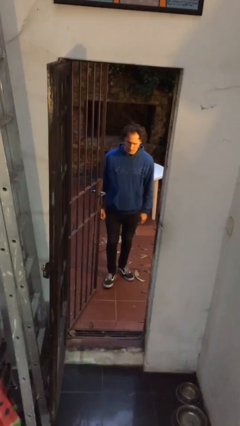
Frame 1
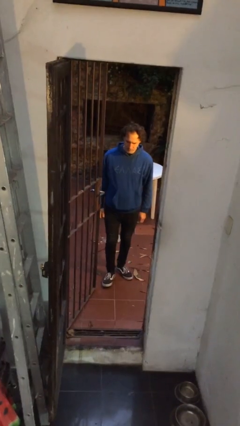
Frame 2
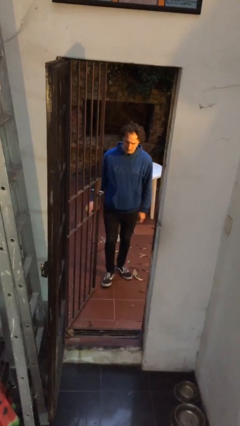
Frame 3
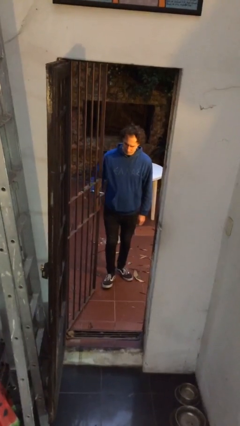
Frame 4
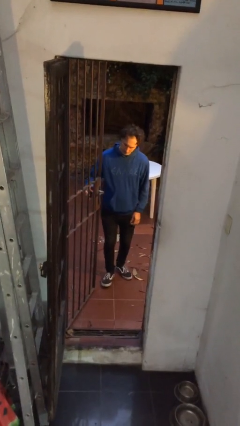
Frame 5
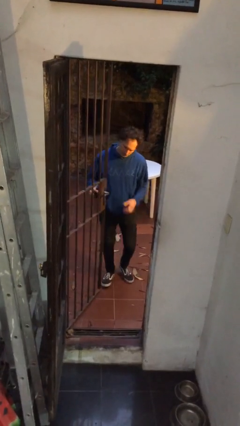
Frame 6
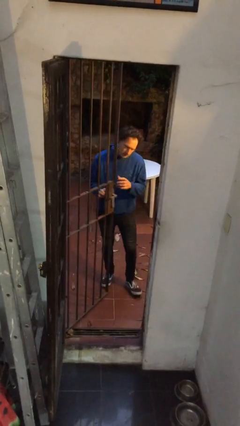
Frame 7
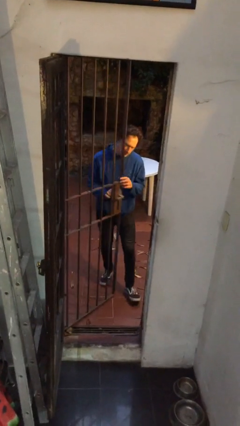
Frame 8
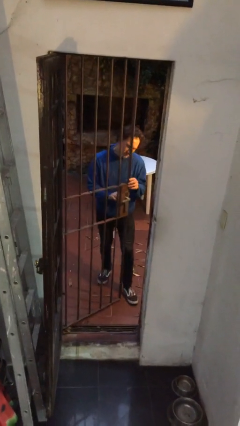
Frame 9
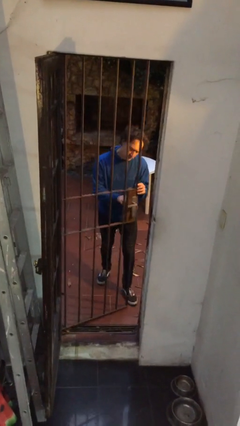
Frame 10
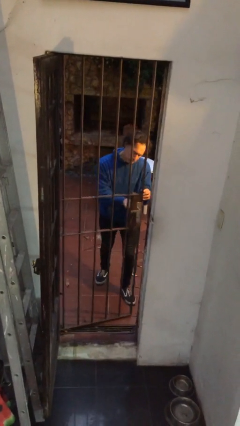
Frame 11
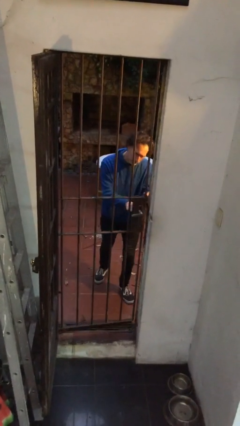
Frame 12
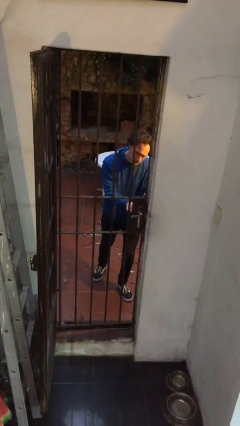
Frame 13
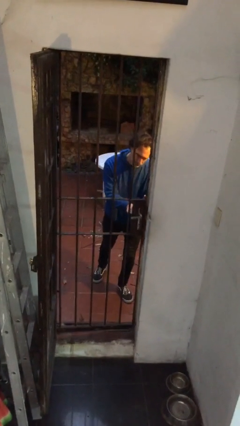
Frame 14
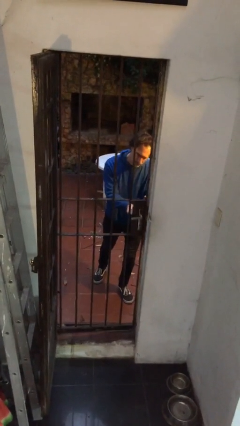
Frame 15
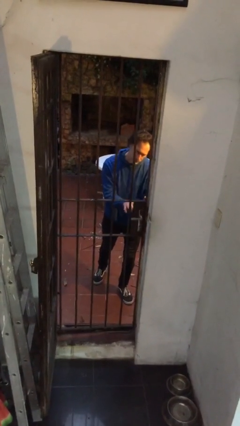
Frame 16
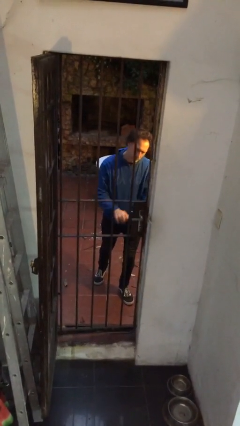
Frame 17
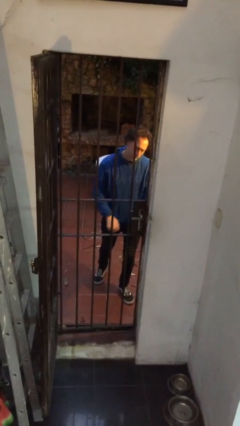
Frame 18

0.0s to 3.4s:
person closes gate

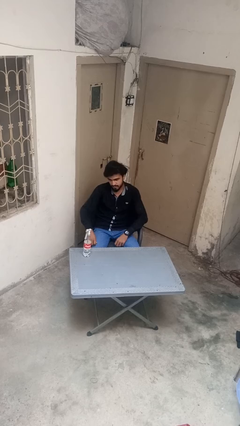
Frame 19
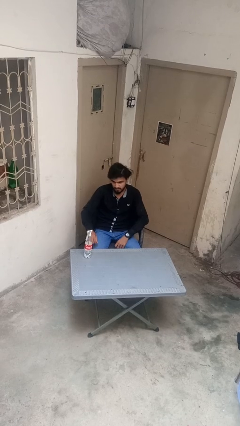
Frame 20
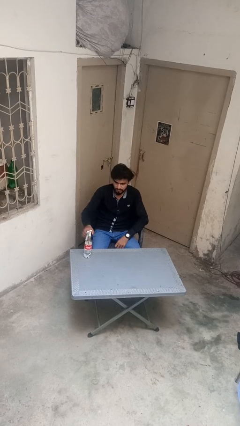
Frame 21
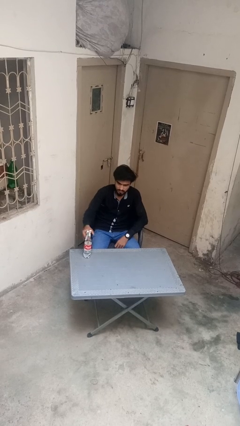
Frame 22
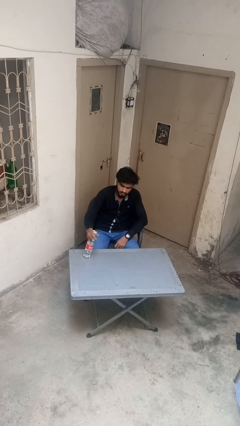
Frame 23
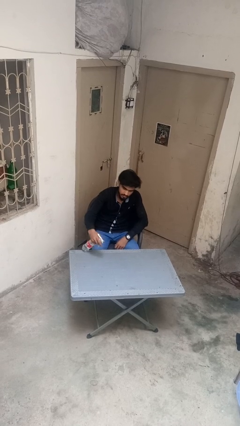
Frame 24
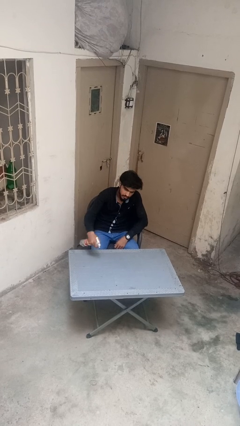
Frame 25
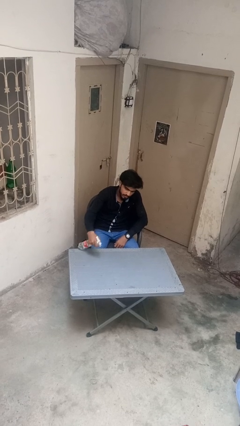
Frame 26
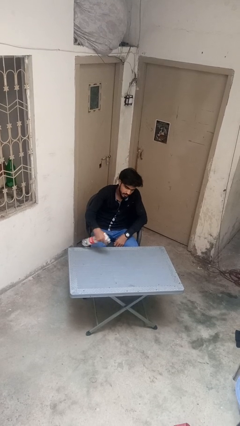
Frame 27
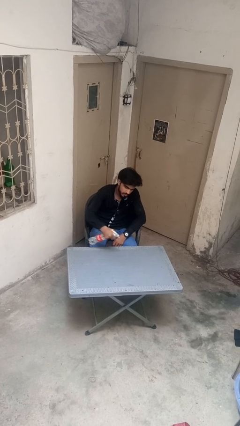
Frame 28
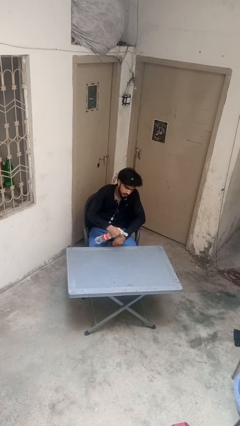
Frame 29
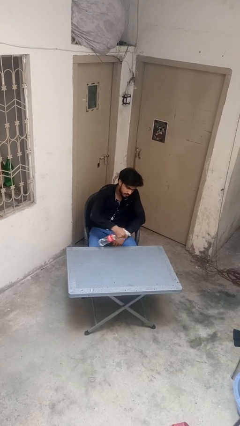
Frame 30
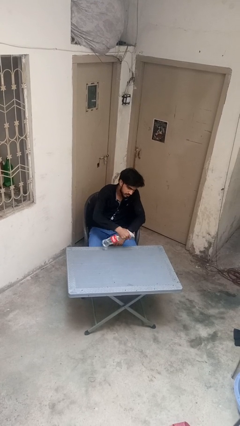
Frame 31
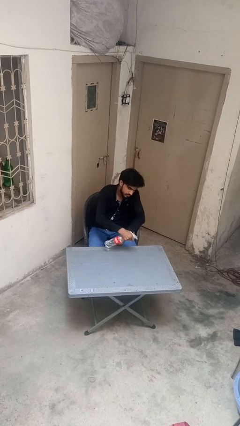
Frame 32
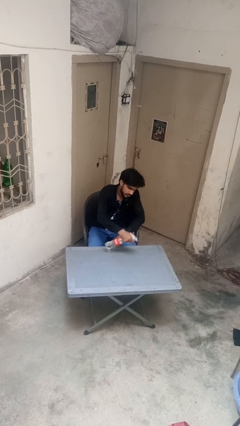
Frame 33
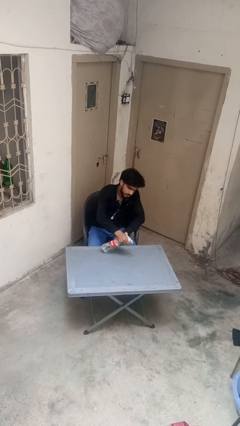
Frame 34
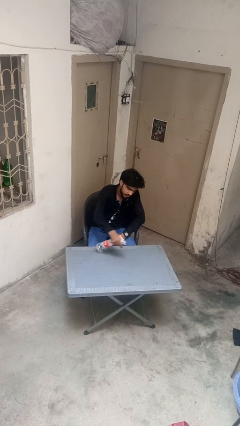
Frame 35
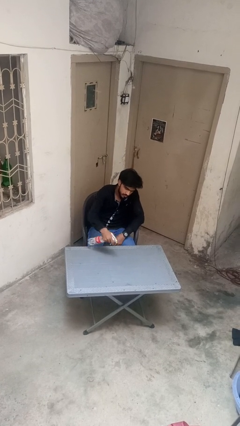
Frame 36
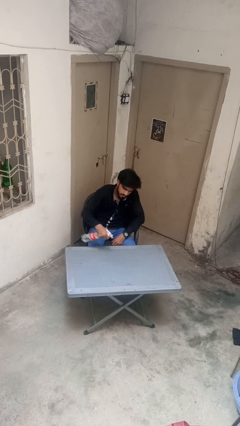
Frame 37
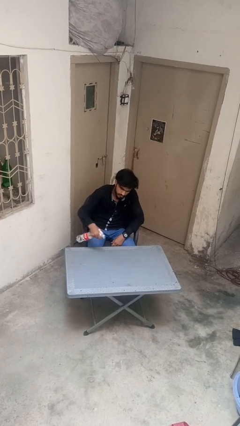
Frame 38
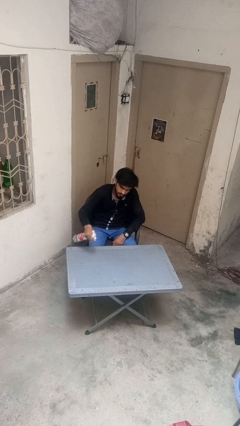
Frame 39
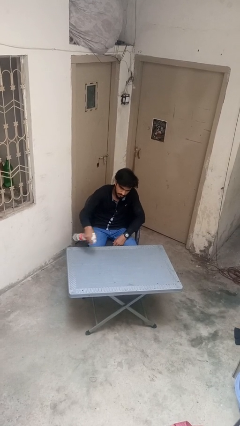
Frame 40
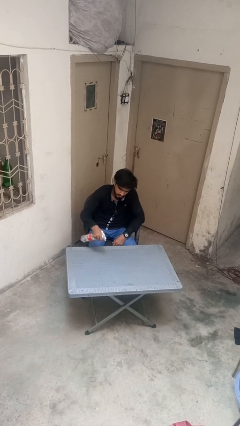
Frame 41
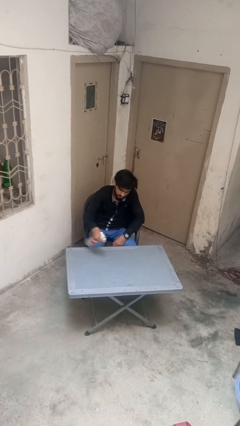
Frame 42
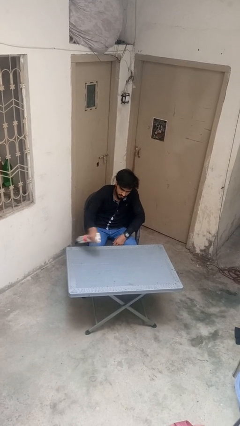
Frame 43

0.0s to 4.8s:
person sprays from bottle

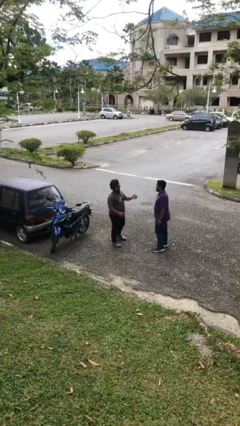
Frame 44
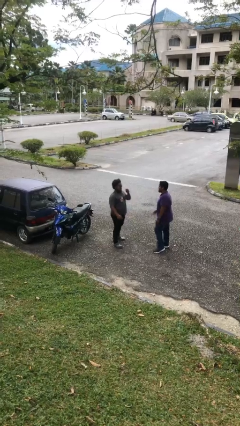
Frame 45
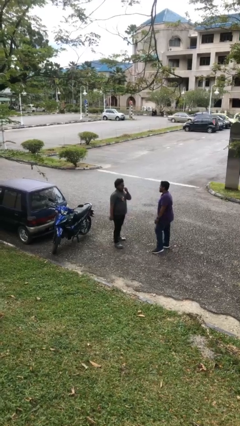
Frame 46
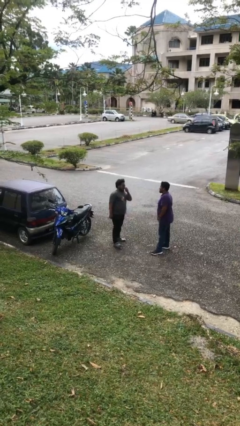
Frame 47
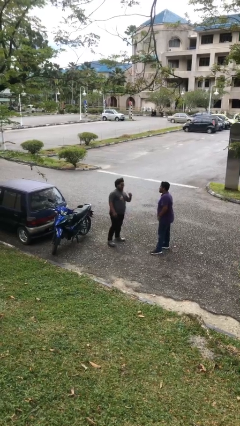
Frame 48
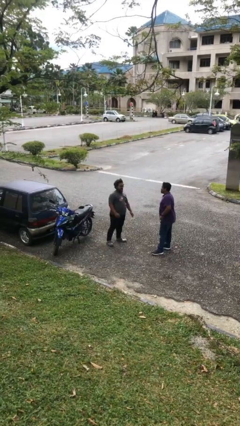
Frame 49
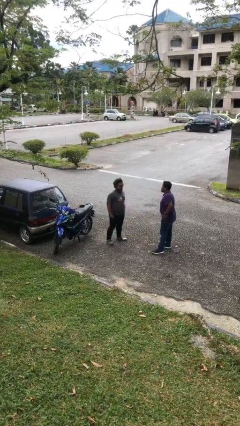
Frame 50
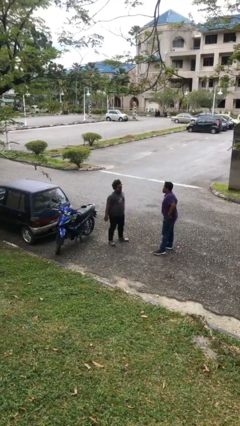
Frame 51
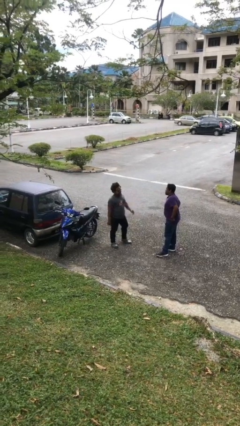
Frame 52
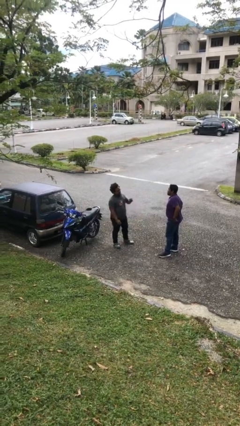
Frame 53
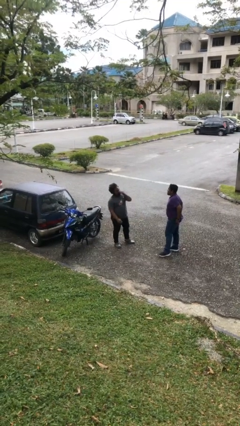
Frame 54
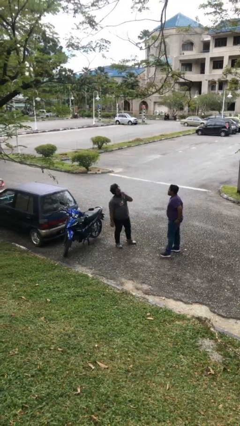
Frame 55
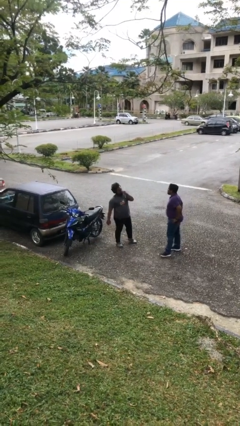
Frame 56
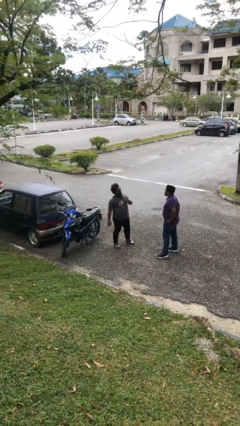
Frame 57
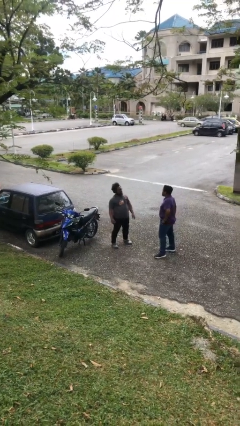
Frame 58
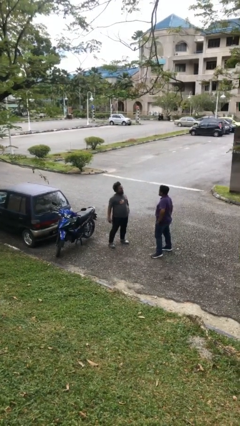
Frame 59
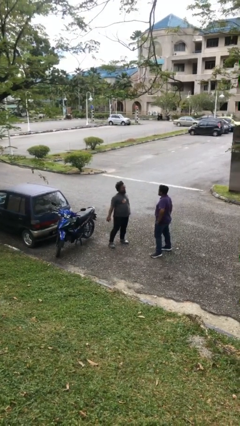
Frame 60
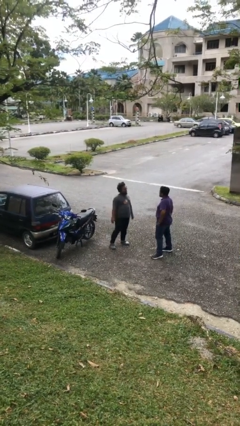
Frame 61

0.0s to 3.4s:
person talks to person

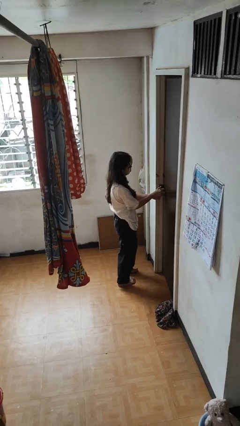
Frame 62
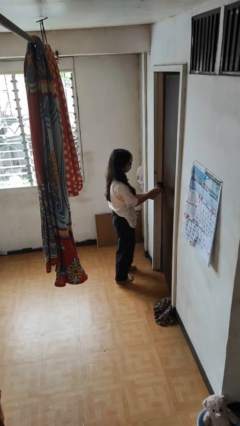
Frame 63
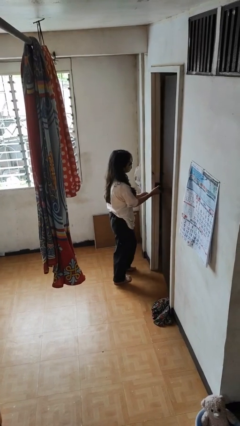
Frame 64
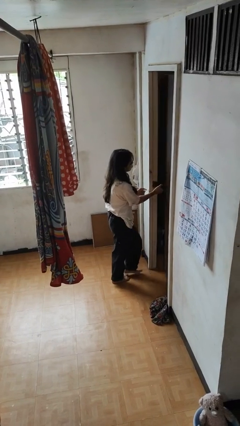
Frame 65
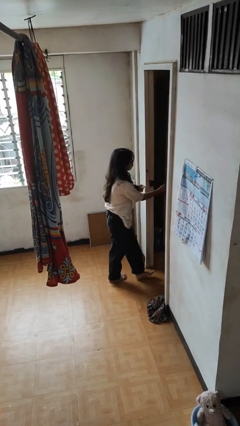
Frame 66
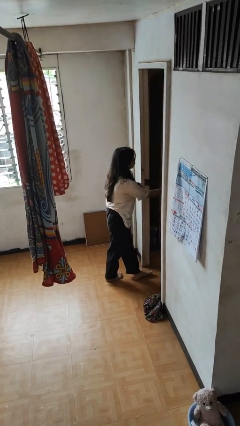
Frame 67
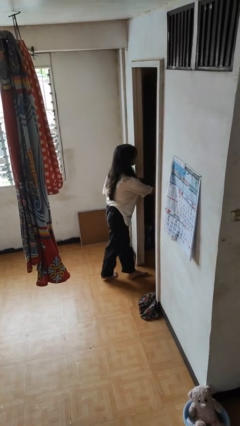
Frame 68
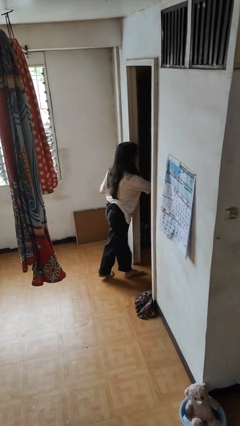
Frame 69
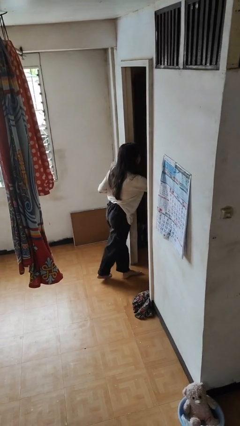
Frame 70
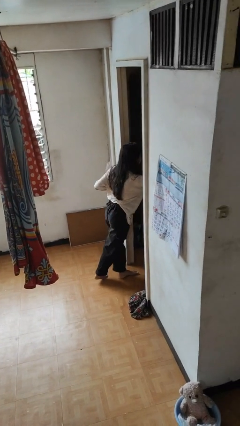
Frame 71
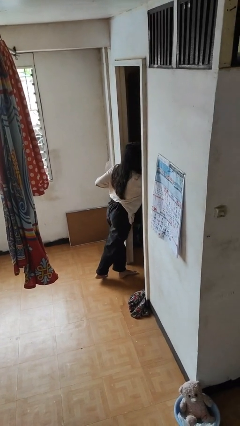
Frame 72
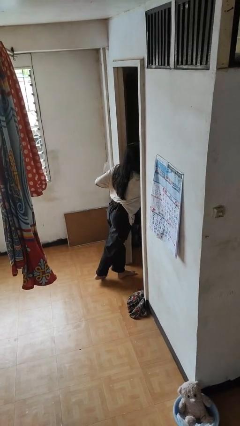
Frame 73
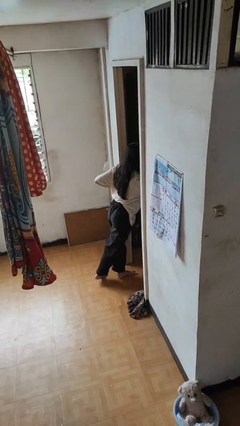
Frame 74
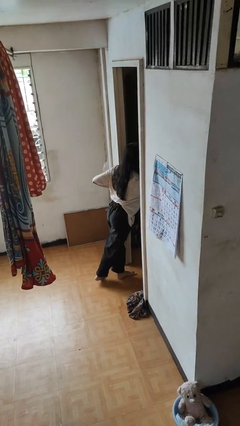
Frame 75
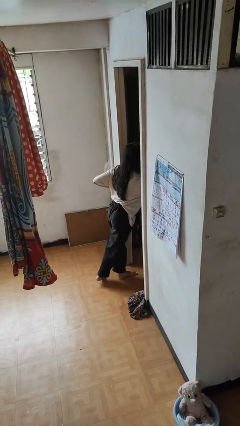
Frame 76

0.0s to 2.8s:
person opens facility door

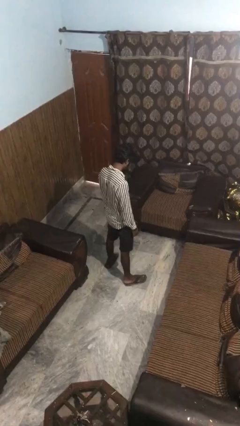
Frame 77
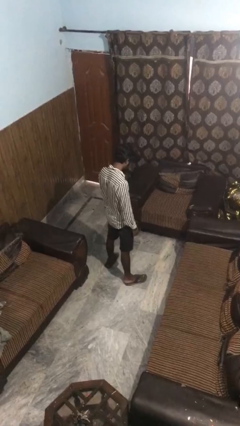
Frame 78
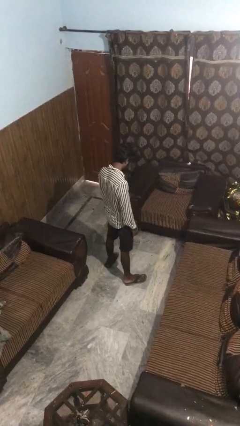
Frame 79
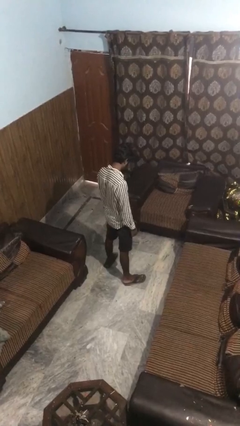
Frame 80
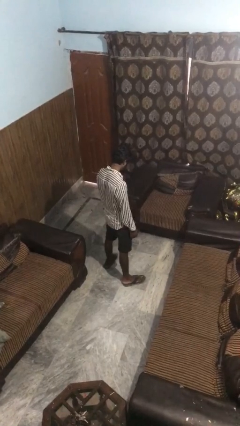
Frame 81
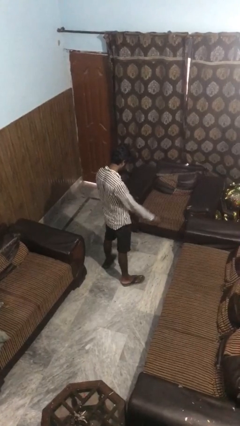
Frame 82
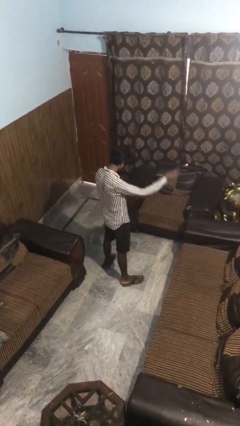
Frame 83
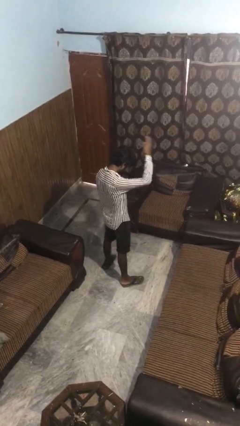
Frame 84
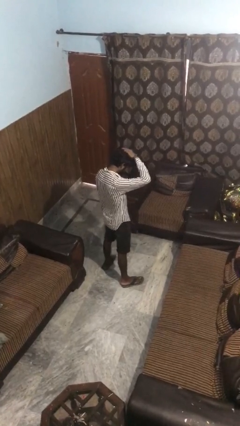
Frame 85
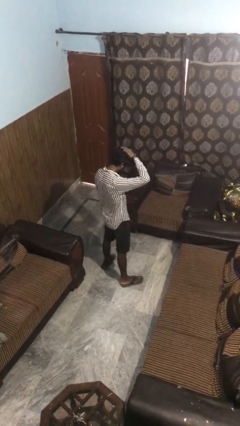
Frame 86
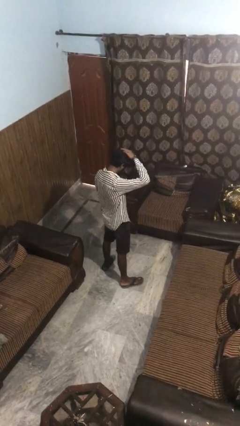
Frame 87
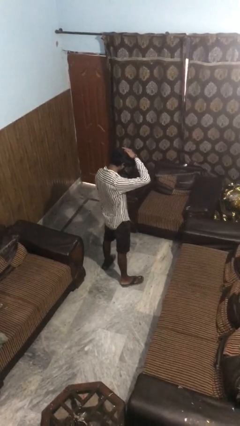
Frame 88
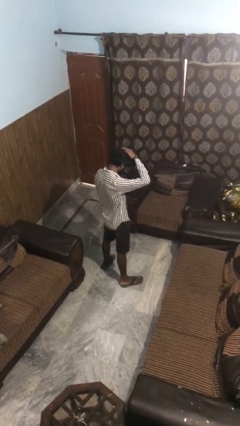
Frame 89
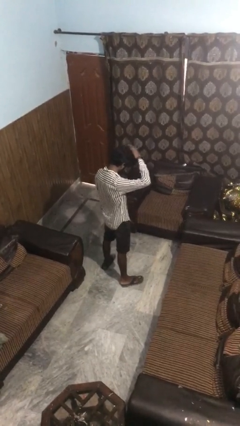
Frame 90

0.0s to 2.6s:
person pats head

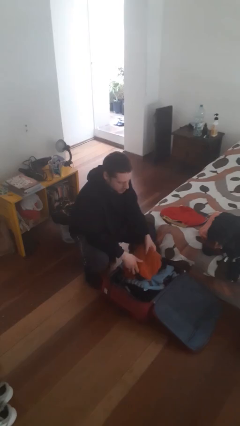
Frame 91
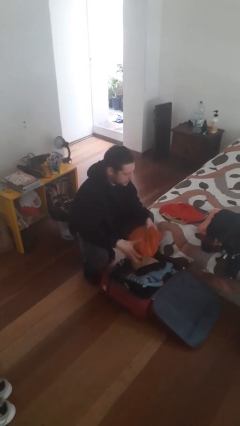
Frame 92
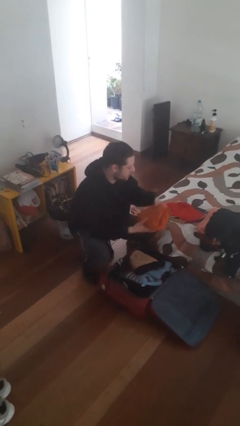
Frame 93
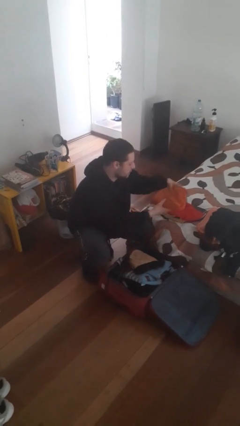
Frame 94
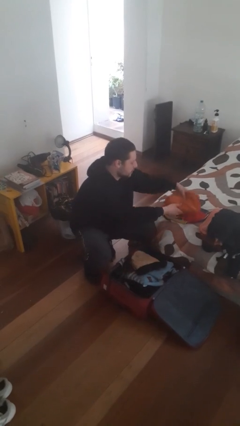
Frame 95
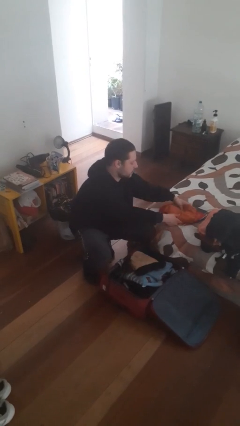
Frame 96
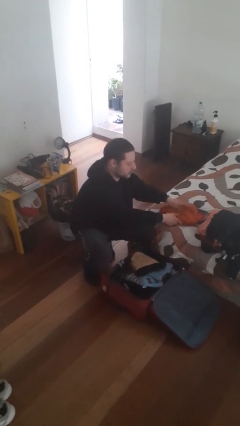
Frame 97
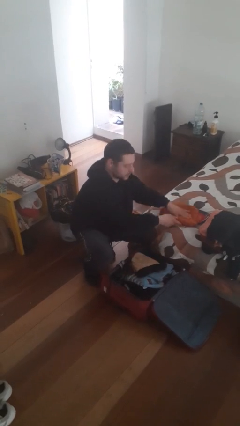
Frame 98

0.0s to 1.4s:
person unloads clothes from suitcase
